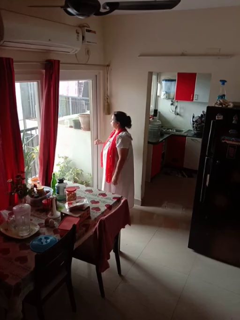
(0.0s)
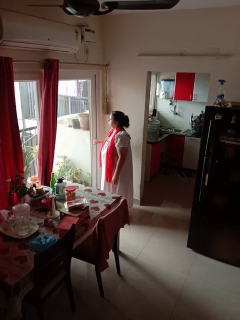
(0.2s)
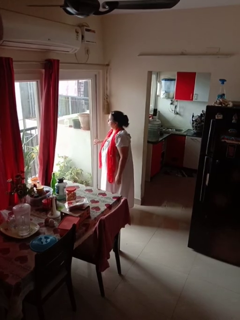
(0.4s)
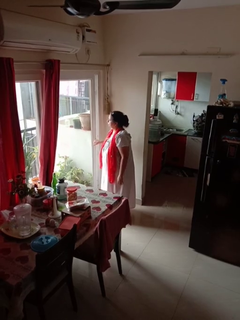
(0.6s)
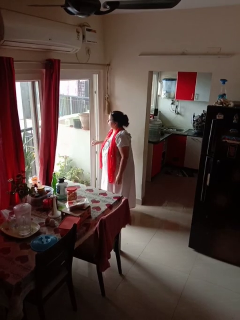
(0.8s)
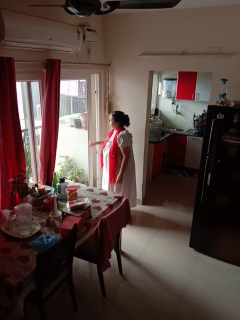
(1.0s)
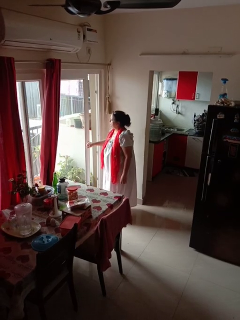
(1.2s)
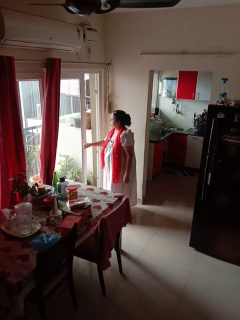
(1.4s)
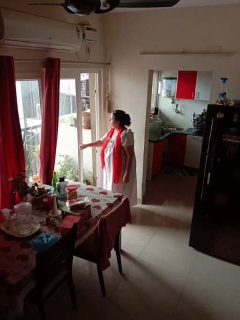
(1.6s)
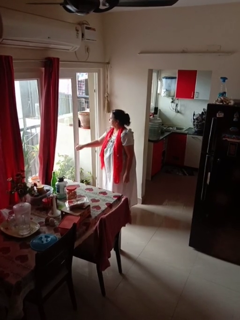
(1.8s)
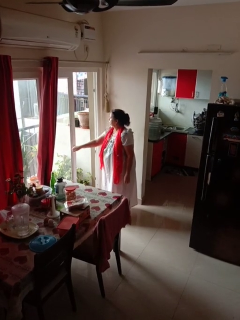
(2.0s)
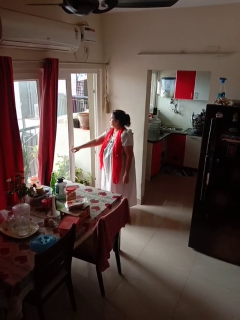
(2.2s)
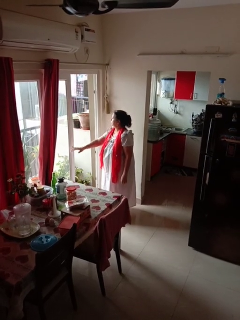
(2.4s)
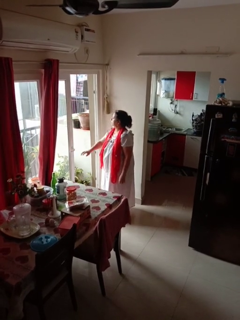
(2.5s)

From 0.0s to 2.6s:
person opens sliding door

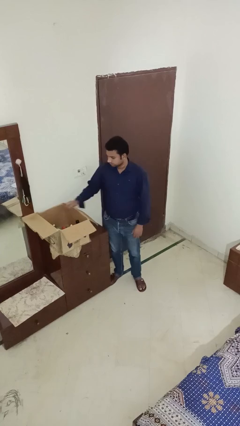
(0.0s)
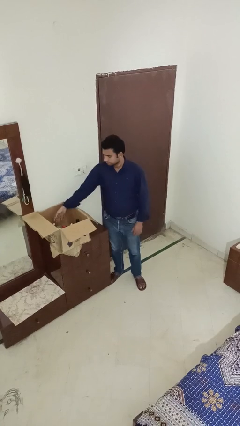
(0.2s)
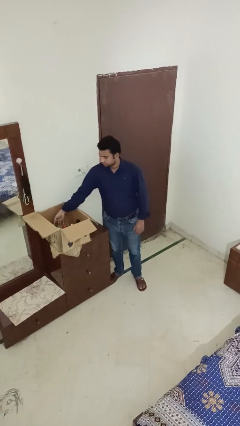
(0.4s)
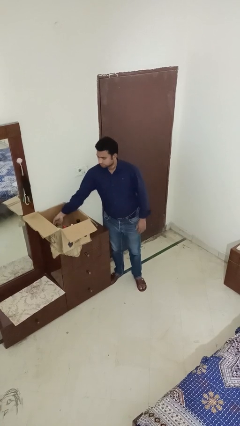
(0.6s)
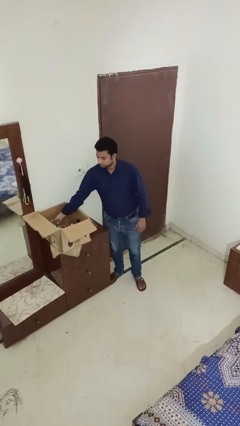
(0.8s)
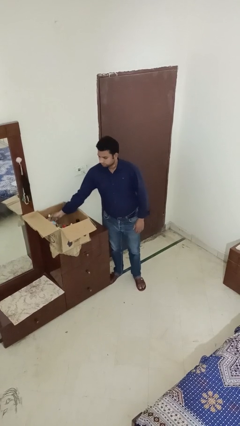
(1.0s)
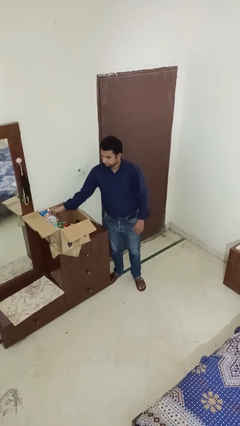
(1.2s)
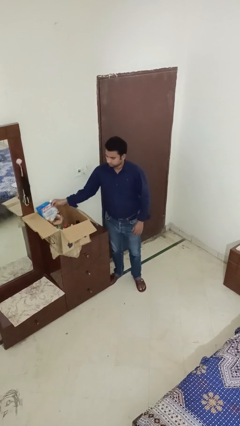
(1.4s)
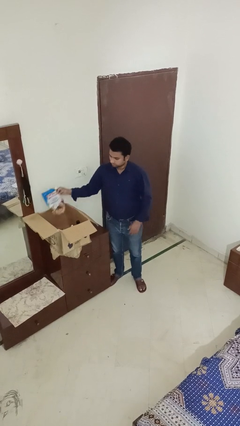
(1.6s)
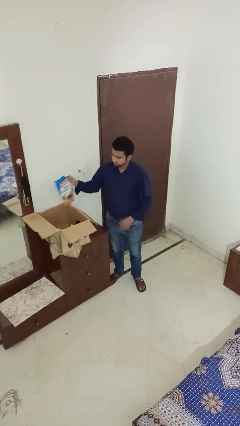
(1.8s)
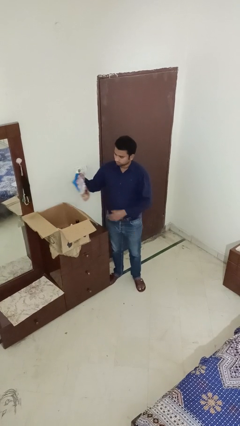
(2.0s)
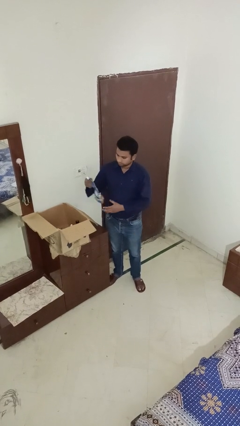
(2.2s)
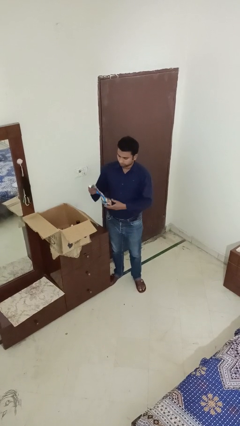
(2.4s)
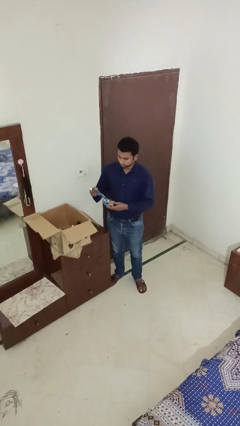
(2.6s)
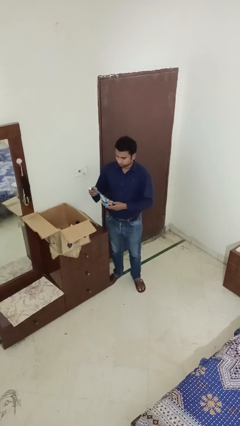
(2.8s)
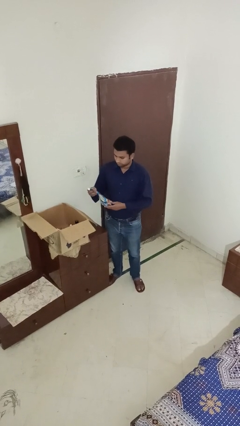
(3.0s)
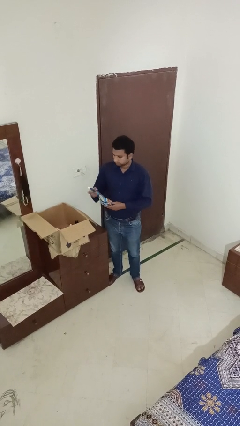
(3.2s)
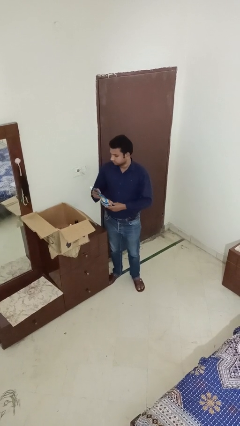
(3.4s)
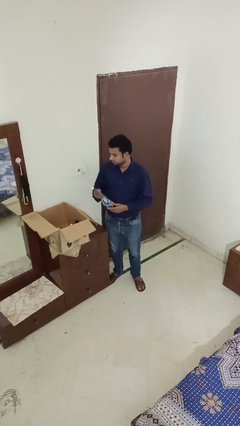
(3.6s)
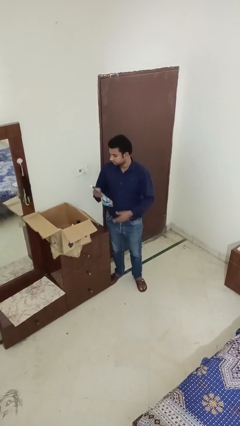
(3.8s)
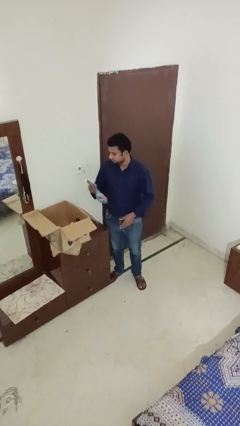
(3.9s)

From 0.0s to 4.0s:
person takes object from box

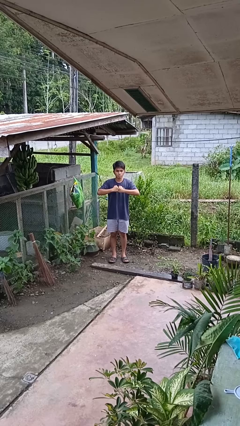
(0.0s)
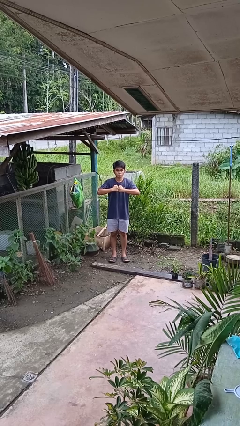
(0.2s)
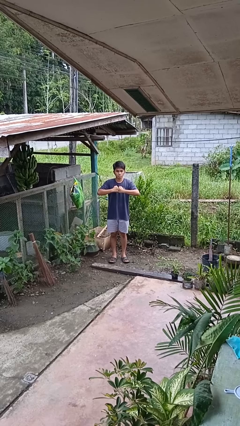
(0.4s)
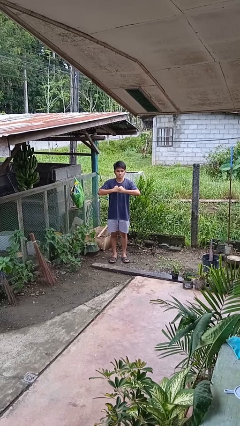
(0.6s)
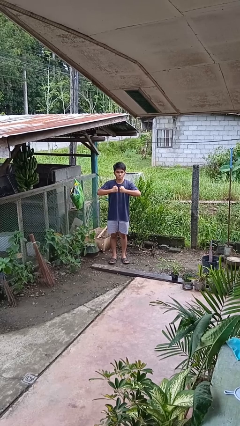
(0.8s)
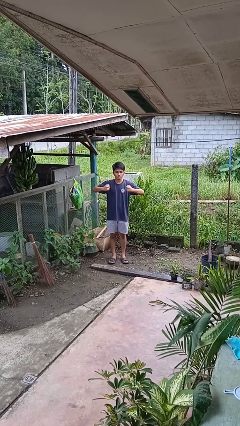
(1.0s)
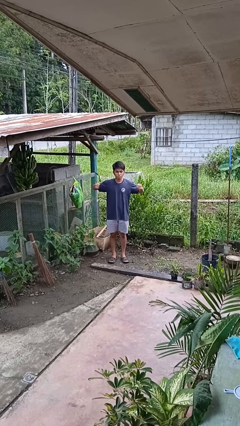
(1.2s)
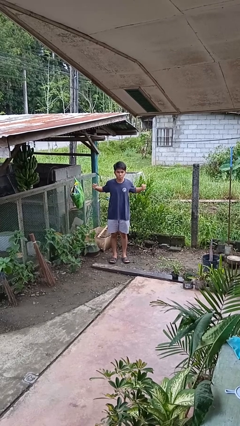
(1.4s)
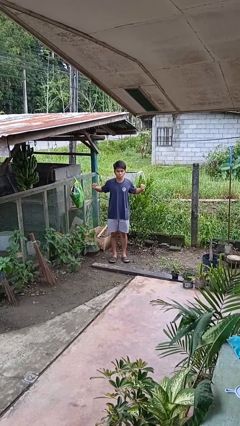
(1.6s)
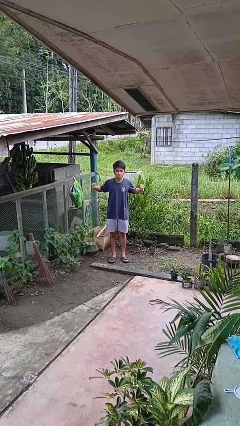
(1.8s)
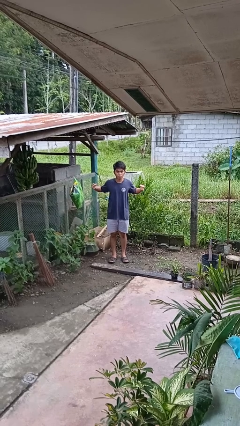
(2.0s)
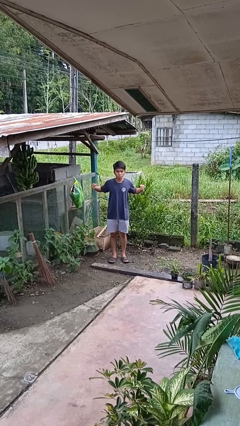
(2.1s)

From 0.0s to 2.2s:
person gestures zoom in

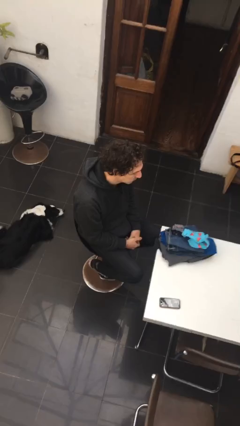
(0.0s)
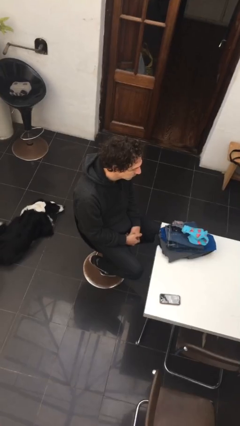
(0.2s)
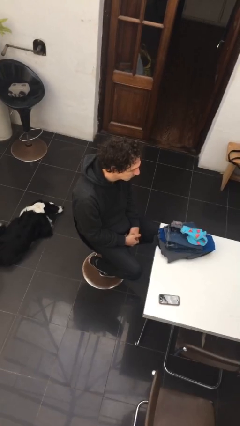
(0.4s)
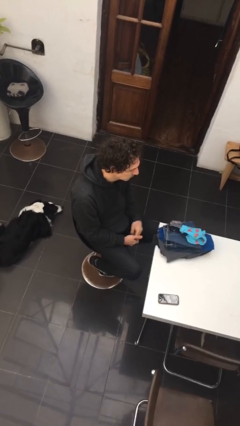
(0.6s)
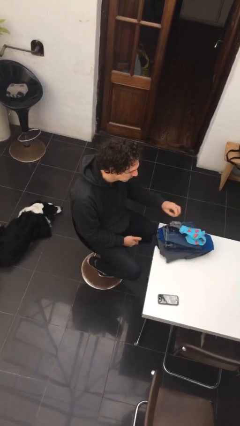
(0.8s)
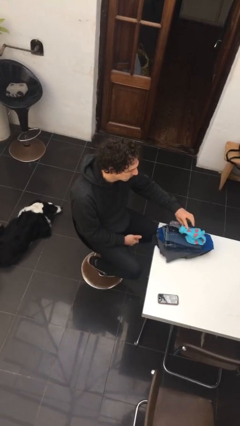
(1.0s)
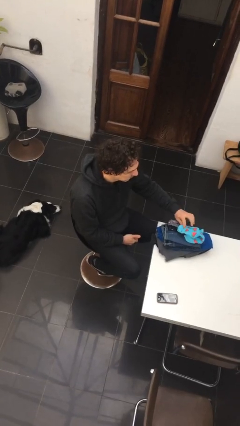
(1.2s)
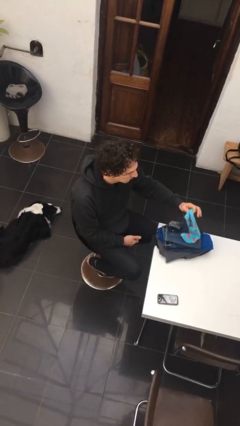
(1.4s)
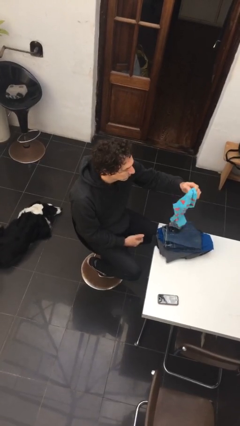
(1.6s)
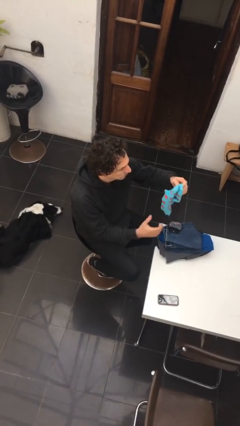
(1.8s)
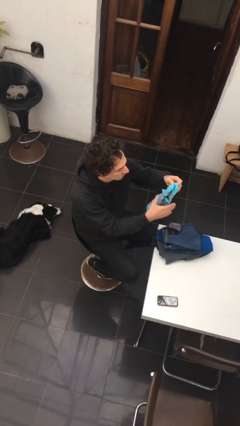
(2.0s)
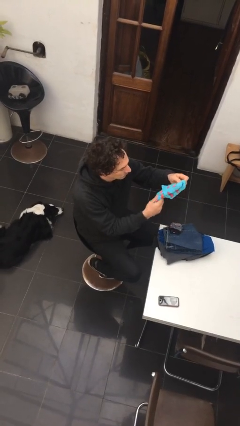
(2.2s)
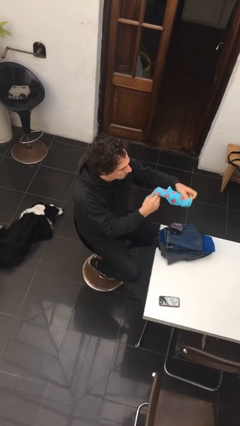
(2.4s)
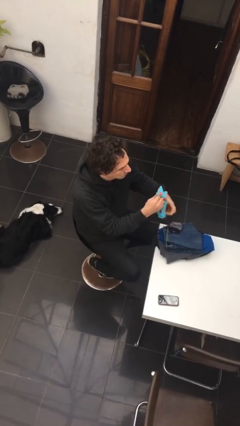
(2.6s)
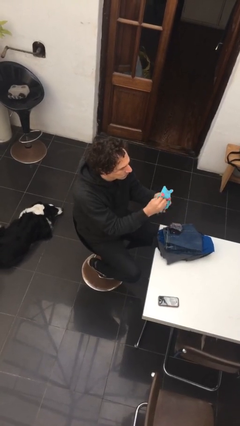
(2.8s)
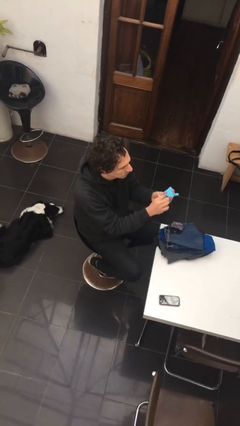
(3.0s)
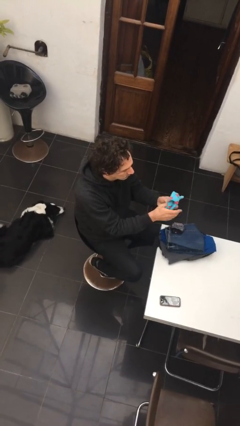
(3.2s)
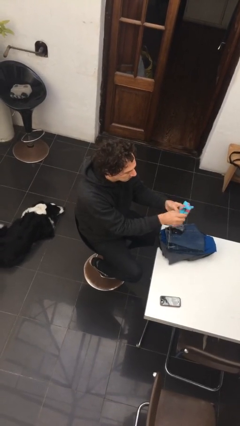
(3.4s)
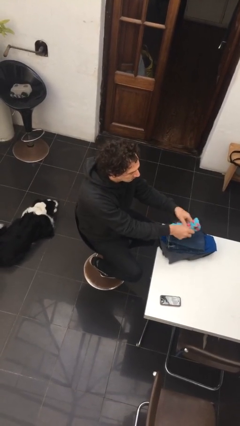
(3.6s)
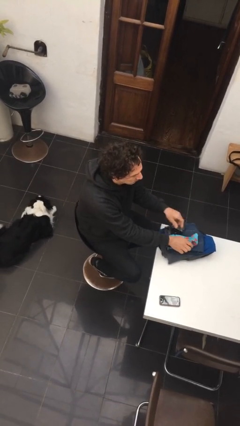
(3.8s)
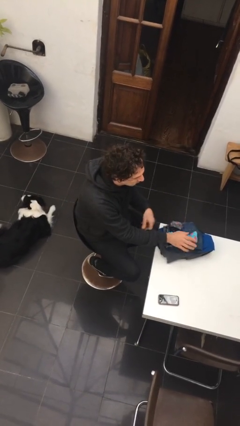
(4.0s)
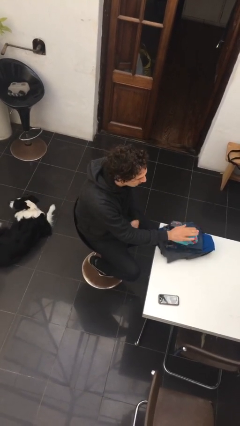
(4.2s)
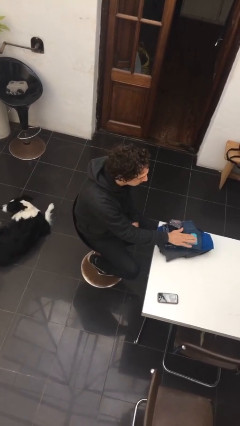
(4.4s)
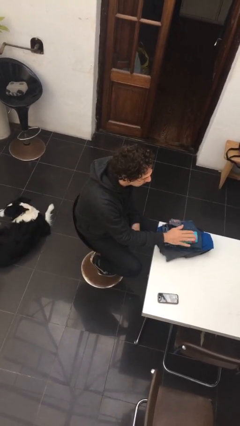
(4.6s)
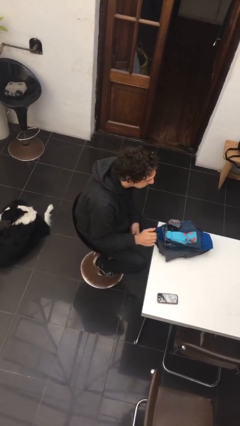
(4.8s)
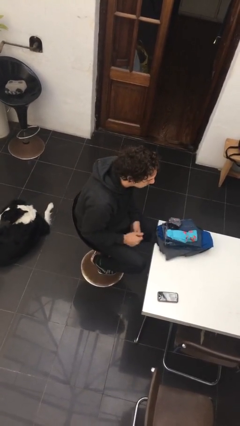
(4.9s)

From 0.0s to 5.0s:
person folds socks

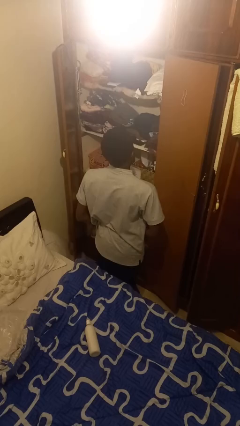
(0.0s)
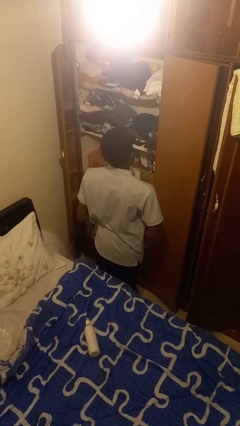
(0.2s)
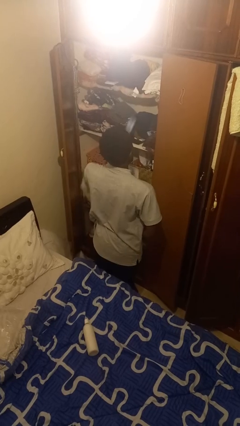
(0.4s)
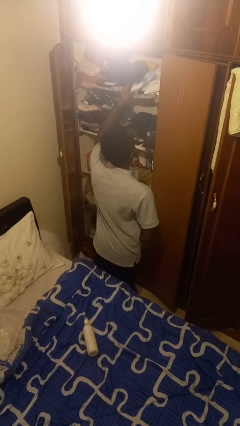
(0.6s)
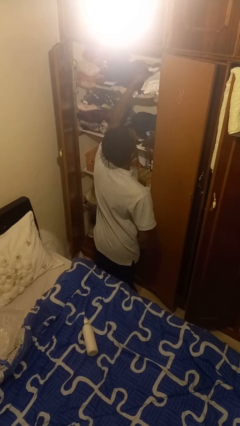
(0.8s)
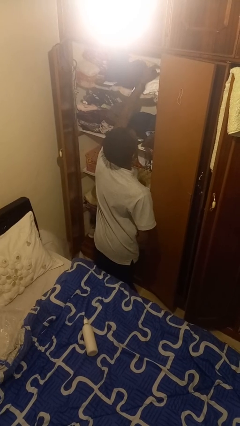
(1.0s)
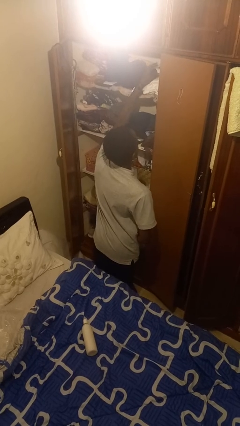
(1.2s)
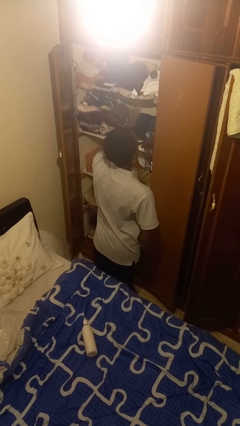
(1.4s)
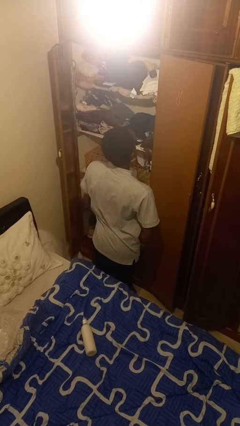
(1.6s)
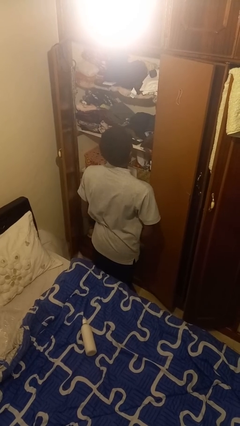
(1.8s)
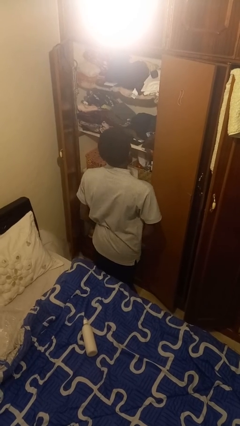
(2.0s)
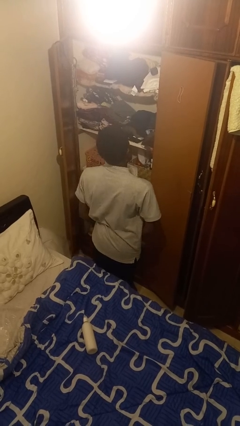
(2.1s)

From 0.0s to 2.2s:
person puts down object on shelf

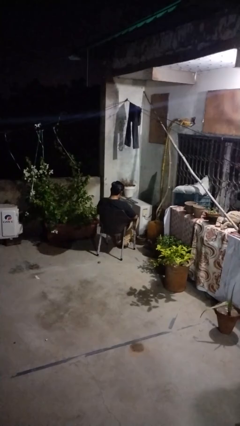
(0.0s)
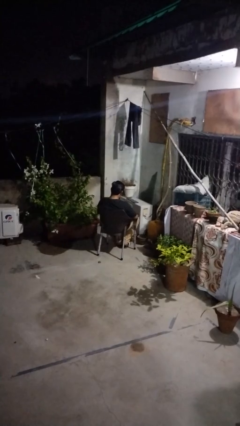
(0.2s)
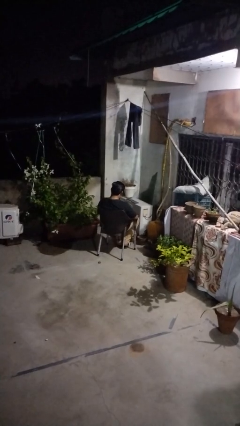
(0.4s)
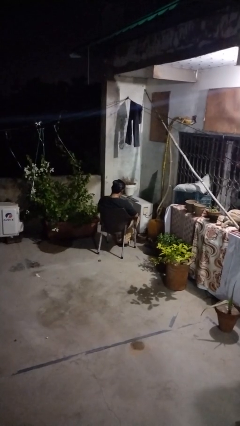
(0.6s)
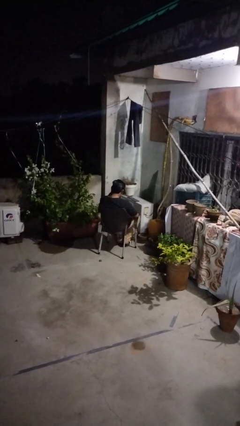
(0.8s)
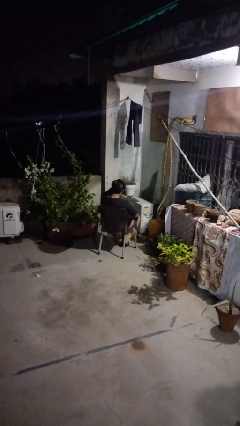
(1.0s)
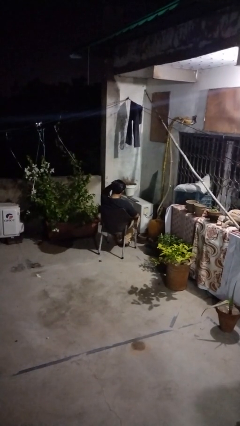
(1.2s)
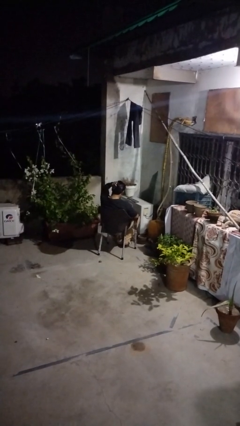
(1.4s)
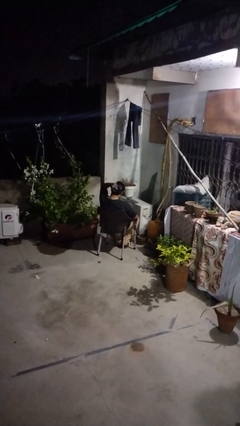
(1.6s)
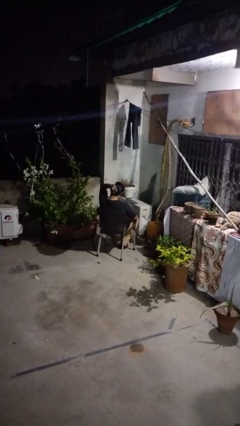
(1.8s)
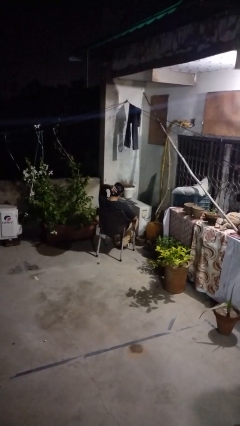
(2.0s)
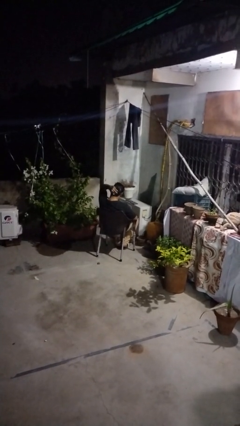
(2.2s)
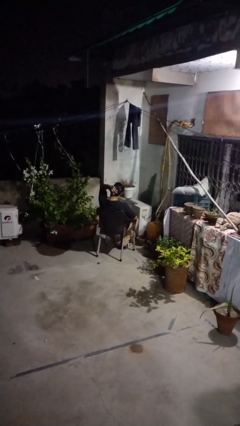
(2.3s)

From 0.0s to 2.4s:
person strokes hair
